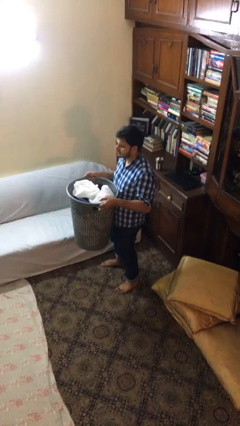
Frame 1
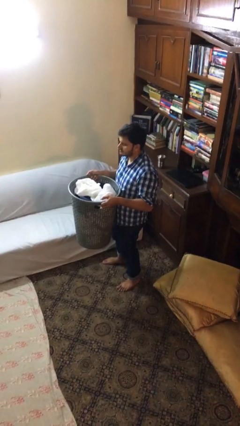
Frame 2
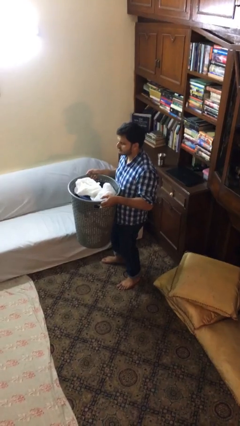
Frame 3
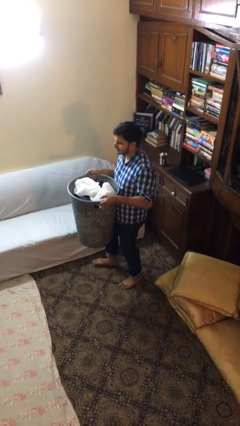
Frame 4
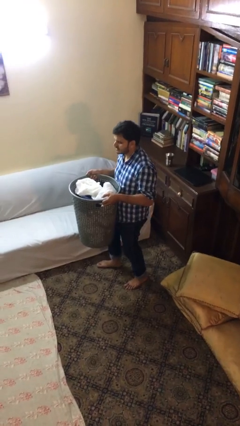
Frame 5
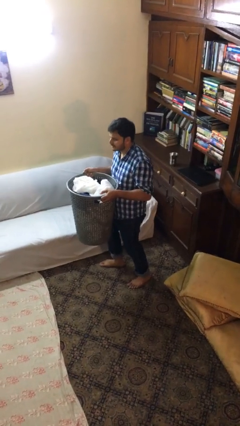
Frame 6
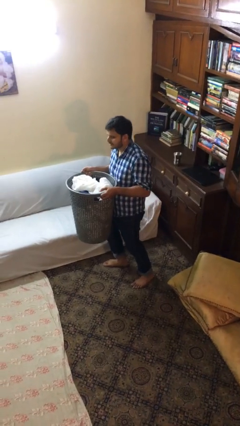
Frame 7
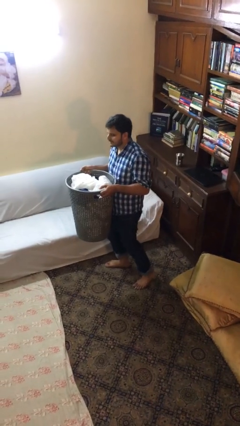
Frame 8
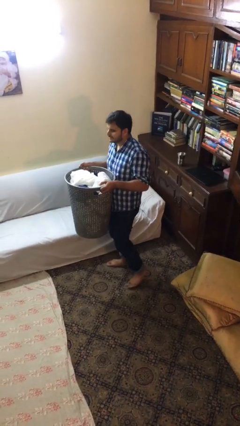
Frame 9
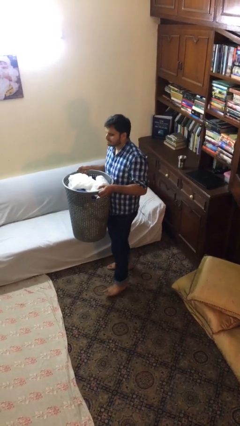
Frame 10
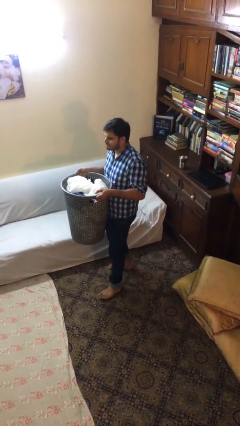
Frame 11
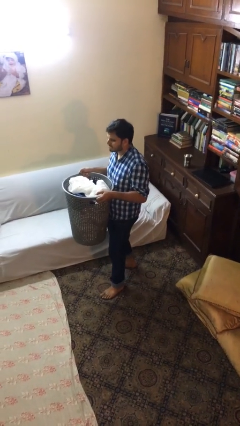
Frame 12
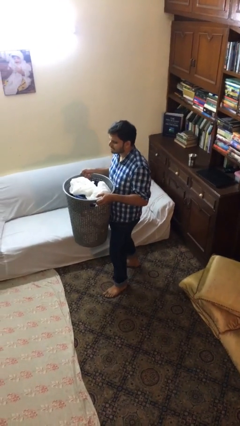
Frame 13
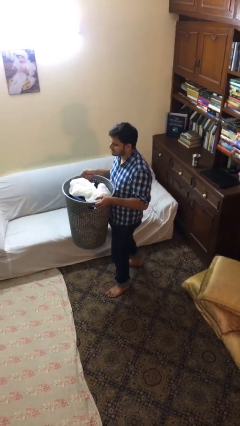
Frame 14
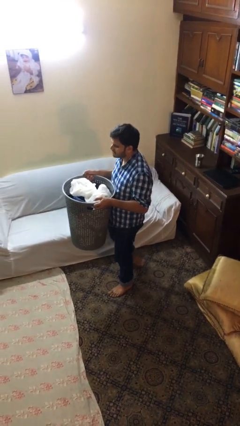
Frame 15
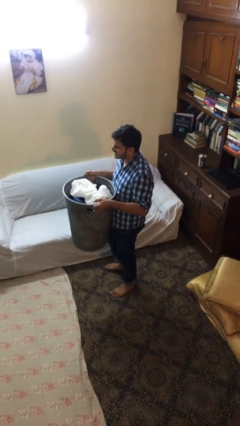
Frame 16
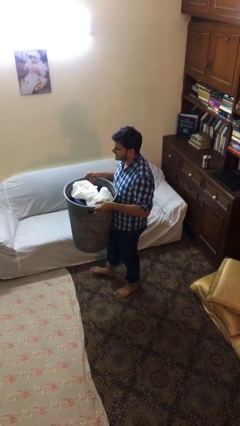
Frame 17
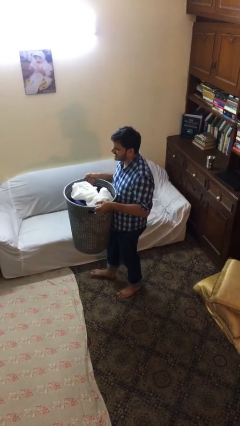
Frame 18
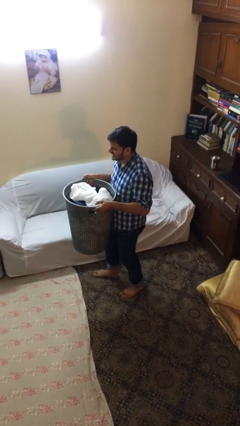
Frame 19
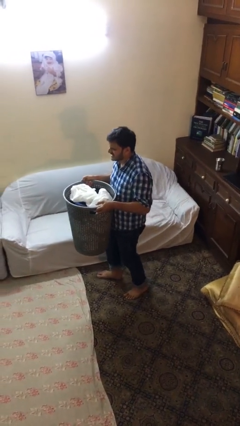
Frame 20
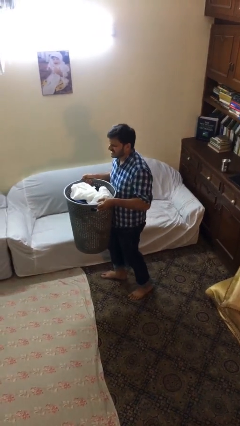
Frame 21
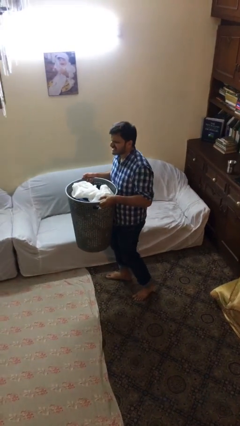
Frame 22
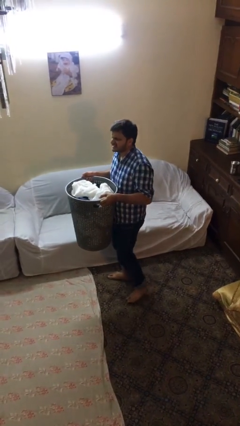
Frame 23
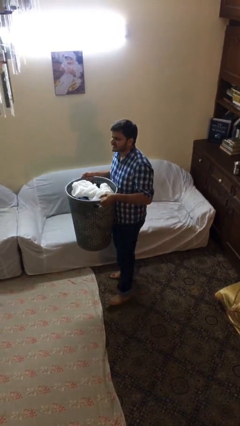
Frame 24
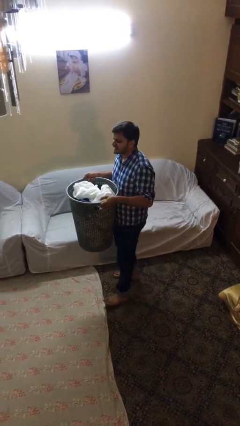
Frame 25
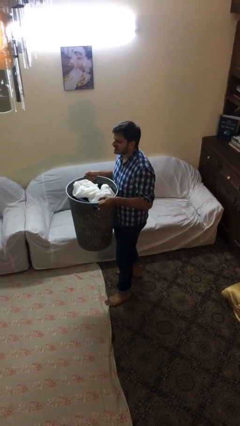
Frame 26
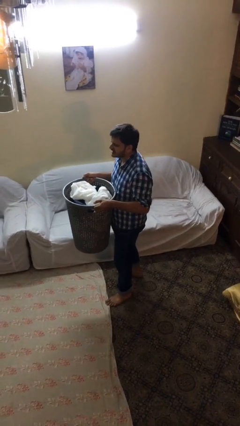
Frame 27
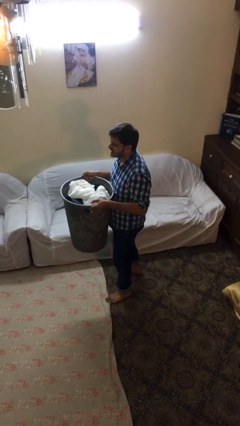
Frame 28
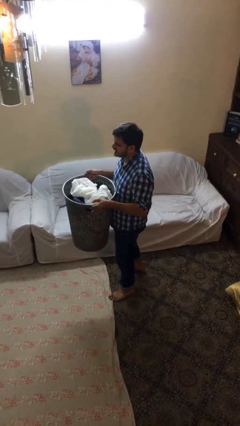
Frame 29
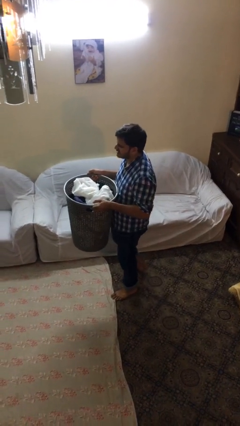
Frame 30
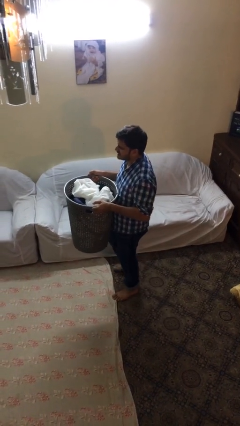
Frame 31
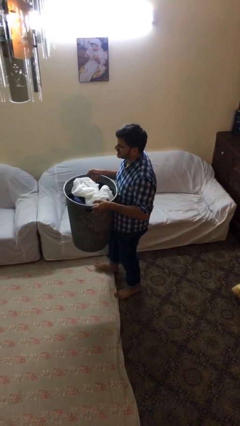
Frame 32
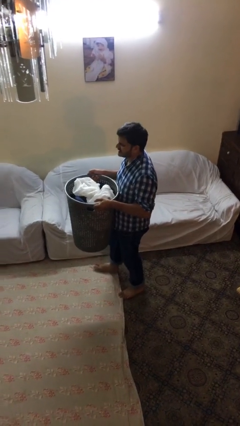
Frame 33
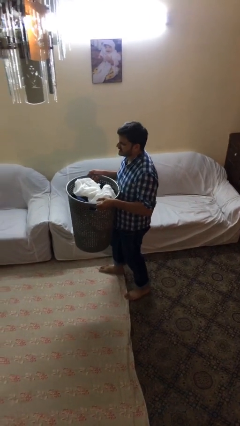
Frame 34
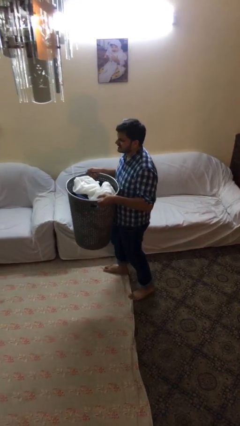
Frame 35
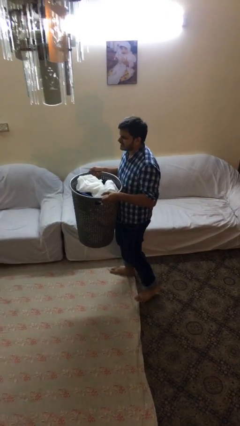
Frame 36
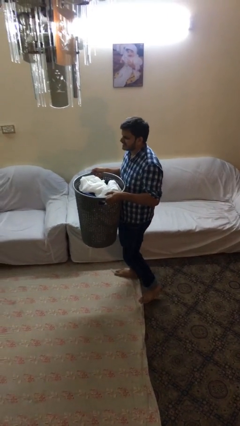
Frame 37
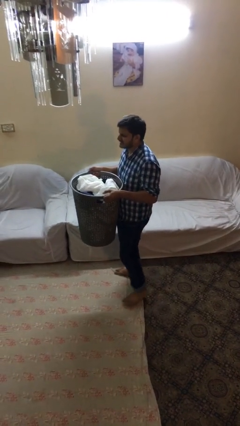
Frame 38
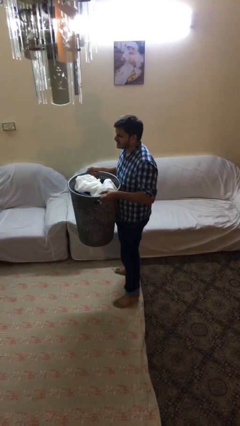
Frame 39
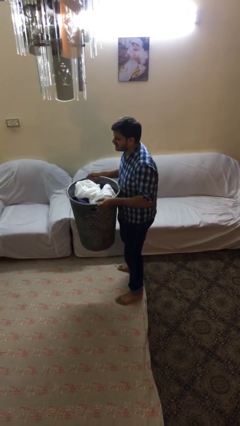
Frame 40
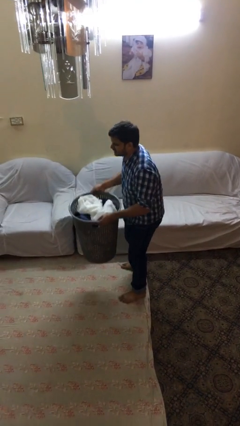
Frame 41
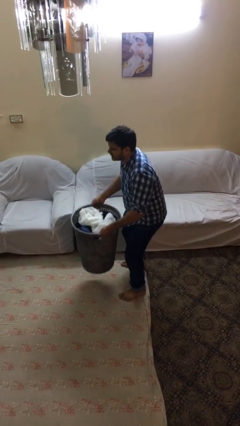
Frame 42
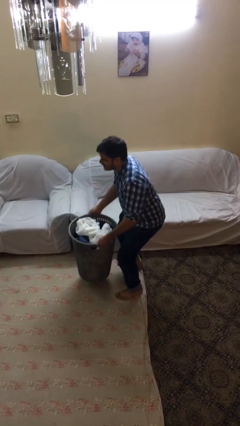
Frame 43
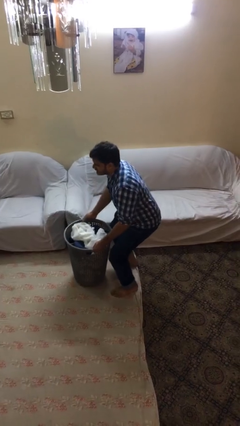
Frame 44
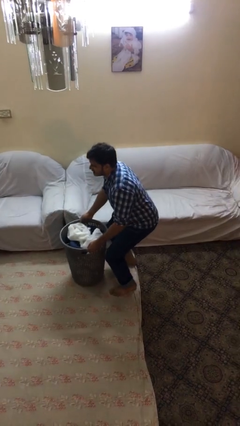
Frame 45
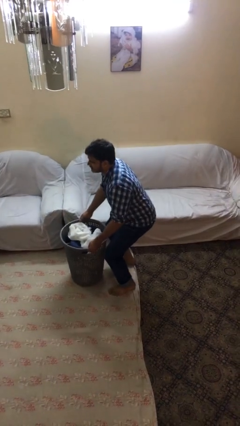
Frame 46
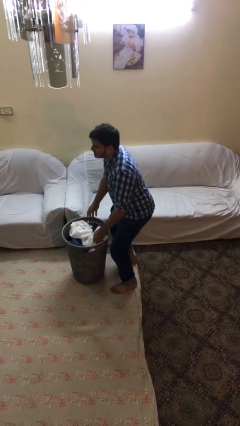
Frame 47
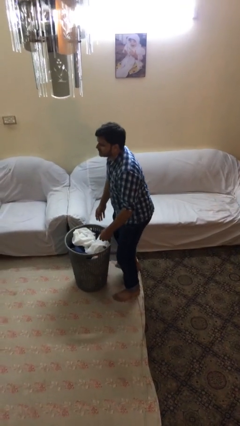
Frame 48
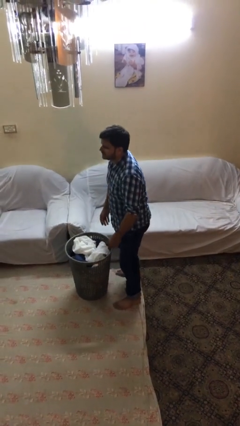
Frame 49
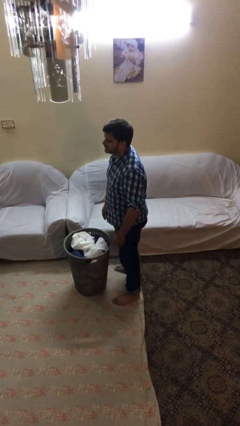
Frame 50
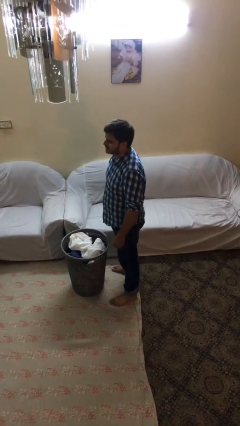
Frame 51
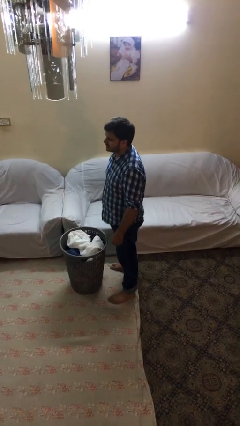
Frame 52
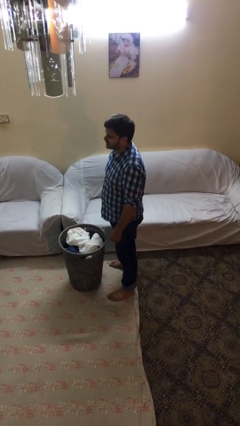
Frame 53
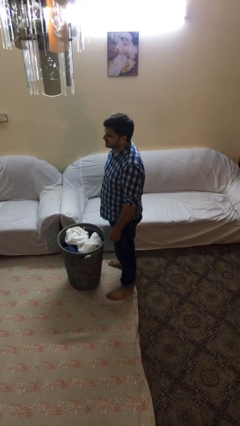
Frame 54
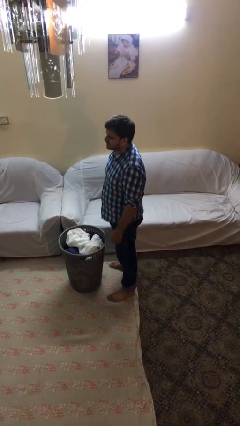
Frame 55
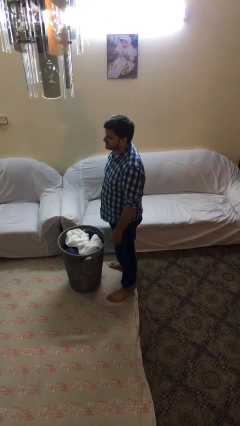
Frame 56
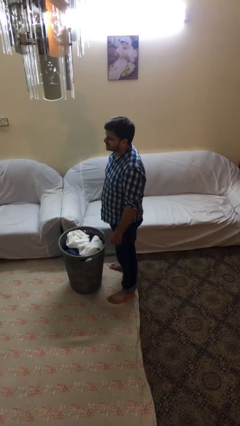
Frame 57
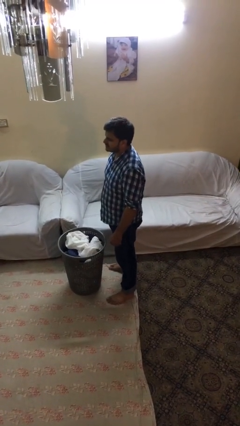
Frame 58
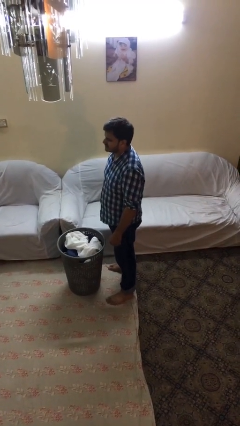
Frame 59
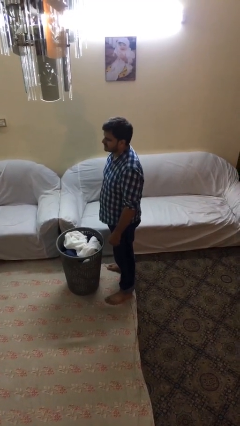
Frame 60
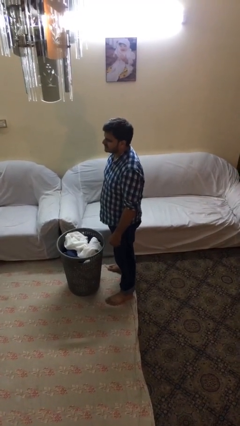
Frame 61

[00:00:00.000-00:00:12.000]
person carries heavy object

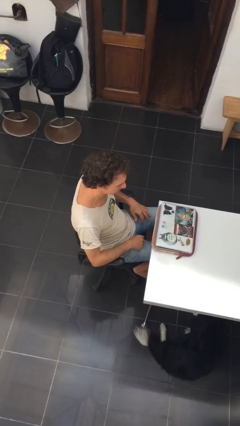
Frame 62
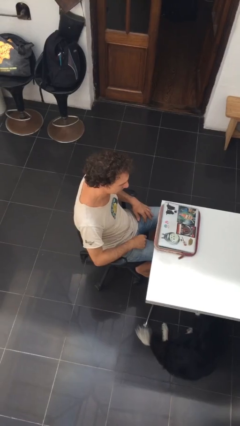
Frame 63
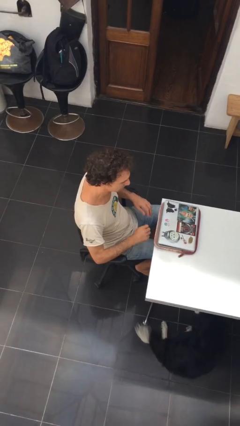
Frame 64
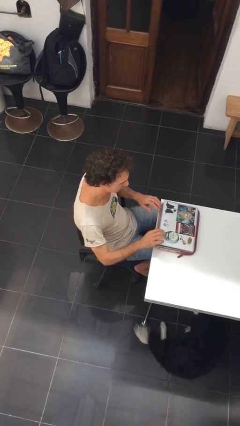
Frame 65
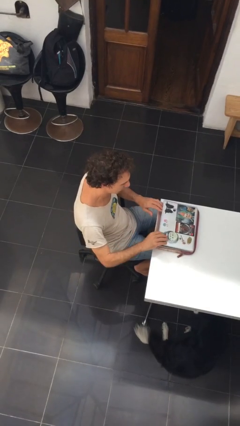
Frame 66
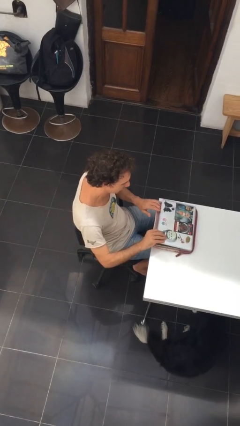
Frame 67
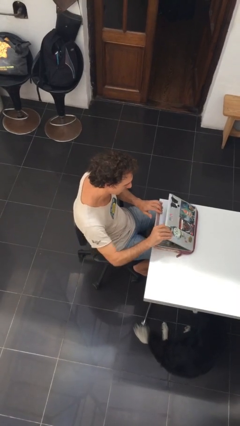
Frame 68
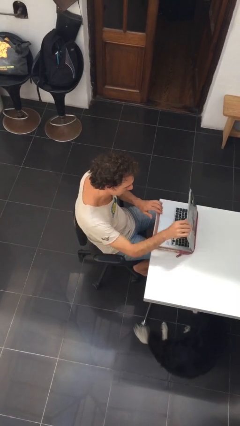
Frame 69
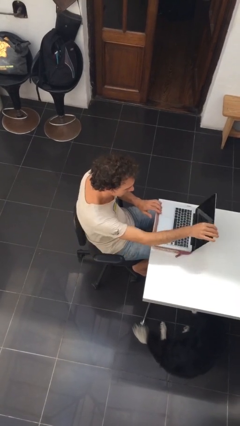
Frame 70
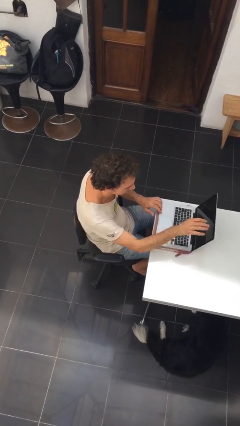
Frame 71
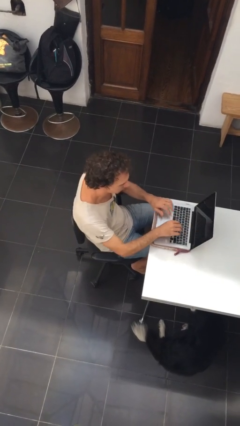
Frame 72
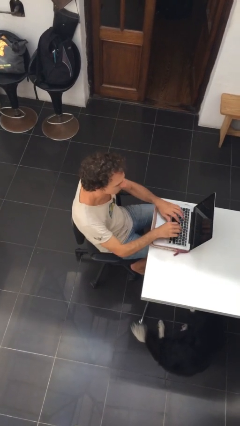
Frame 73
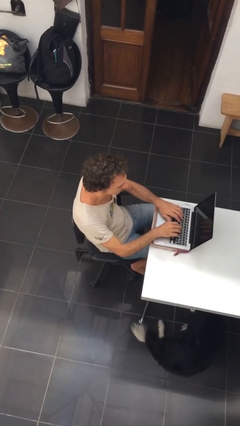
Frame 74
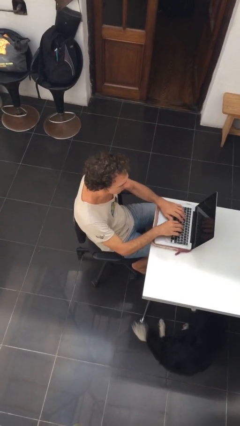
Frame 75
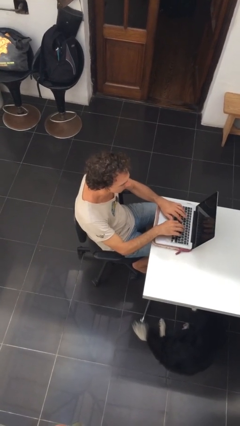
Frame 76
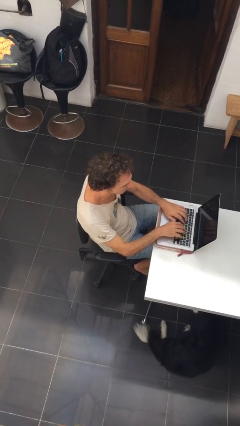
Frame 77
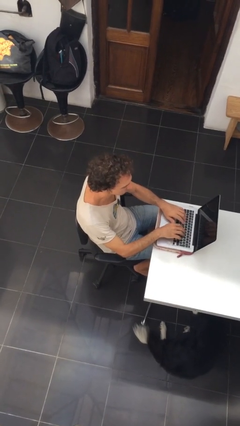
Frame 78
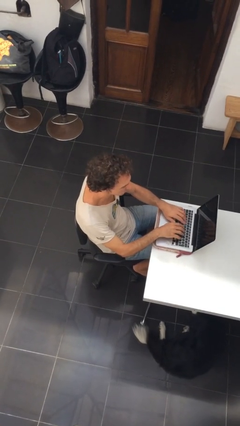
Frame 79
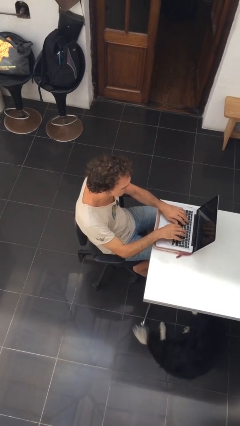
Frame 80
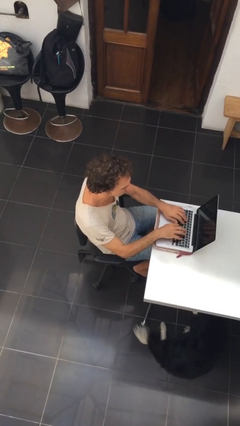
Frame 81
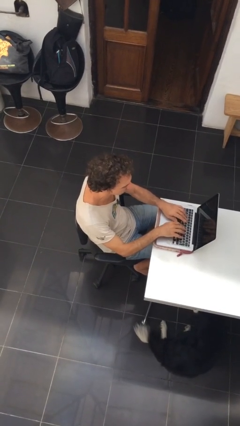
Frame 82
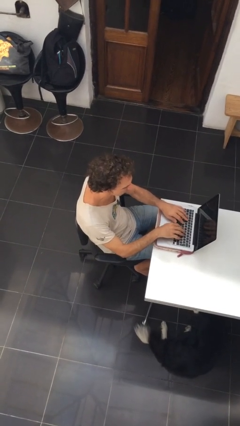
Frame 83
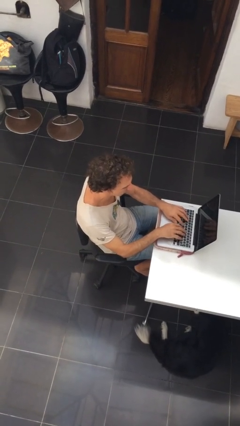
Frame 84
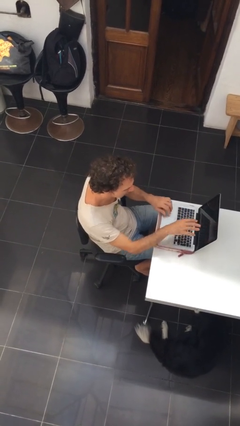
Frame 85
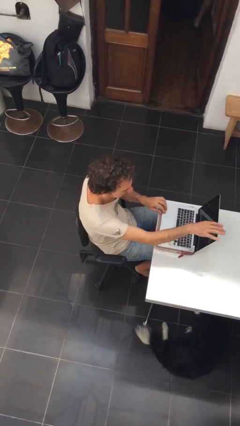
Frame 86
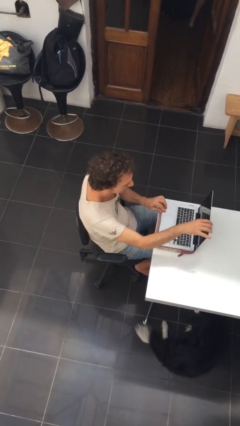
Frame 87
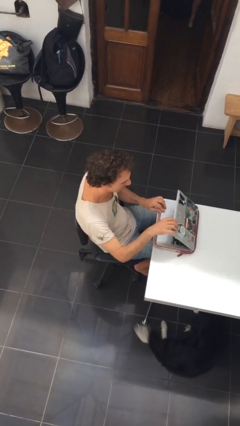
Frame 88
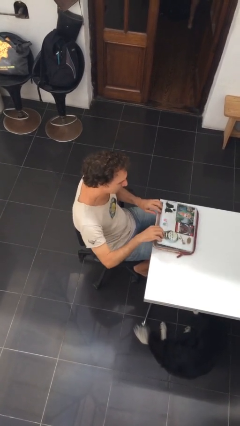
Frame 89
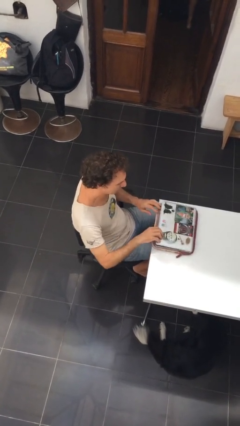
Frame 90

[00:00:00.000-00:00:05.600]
person interacts with laptop

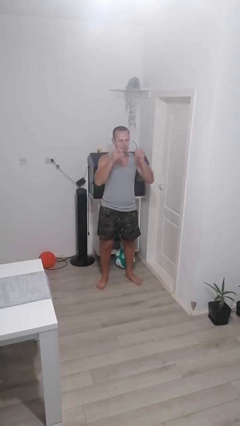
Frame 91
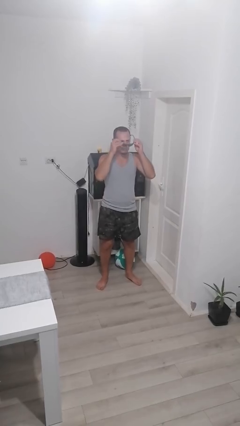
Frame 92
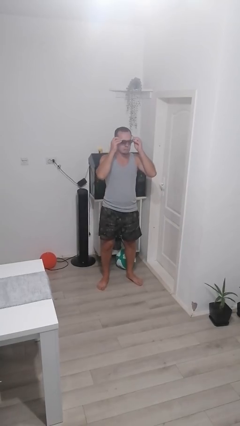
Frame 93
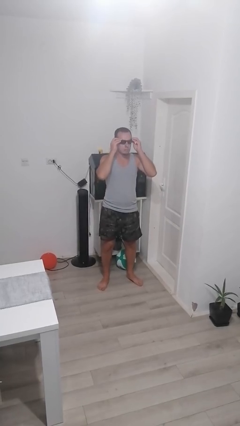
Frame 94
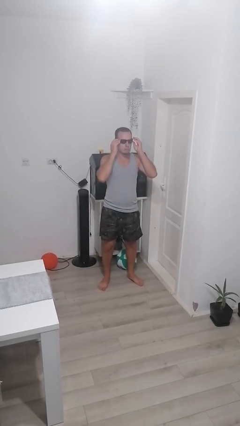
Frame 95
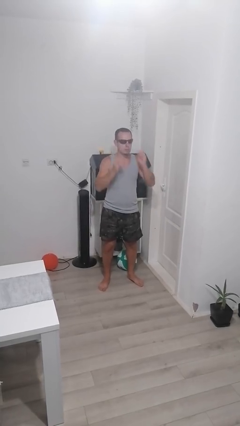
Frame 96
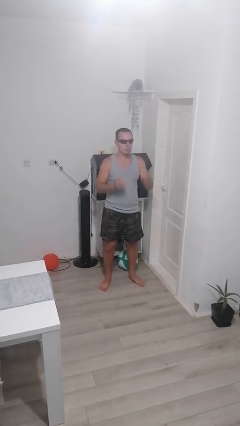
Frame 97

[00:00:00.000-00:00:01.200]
person puts on sunglasses
